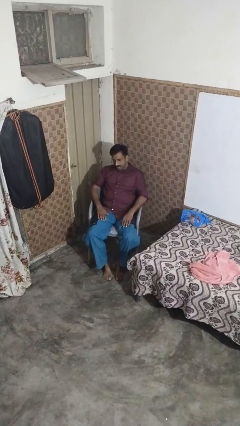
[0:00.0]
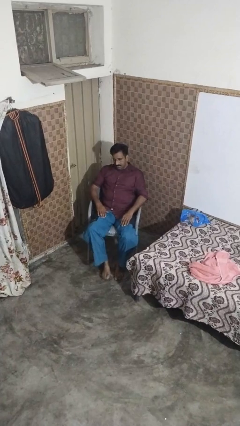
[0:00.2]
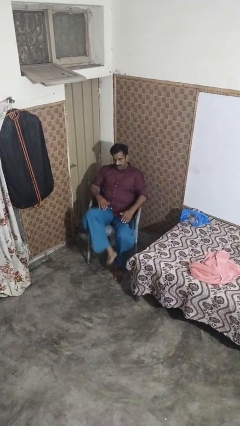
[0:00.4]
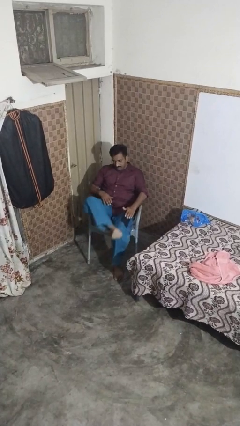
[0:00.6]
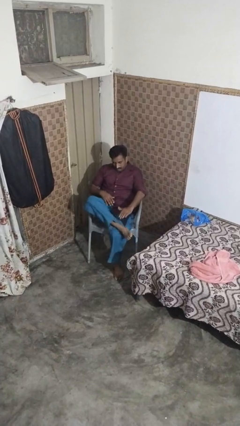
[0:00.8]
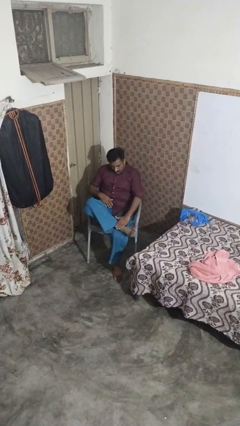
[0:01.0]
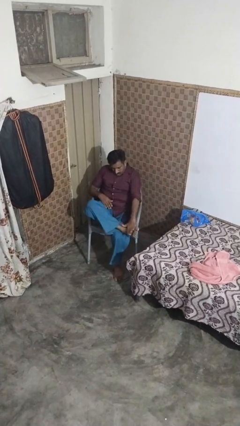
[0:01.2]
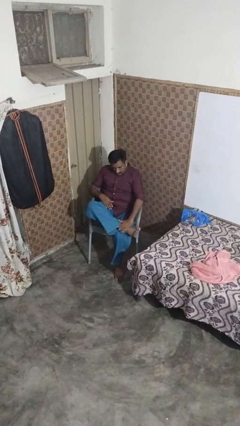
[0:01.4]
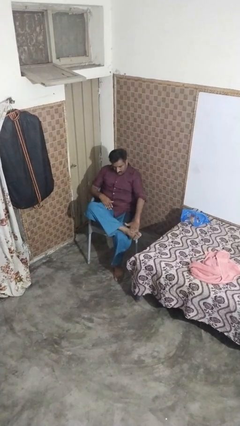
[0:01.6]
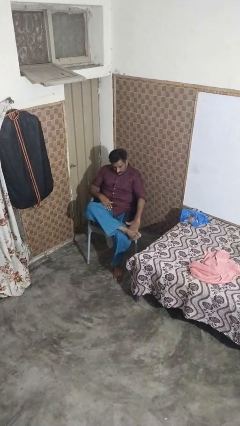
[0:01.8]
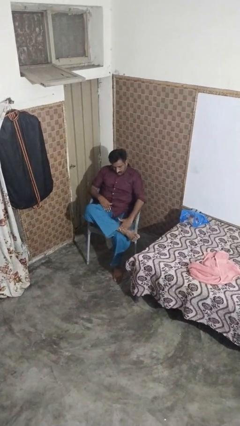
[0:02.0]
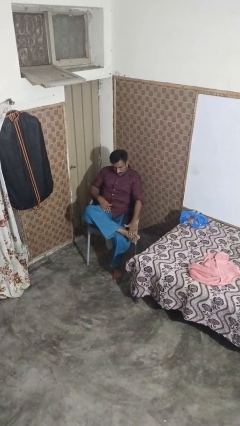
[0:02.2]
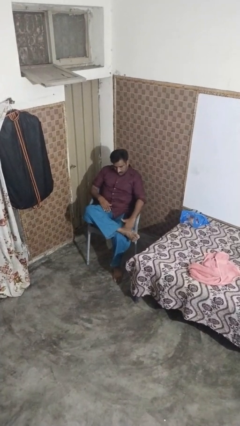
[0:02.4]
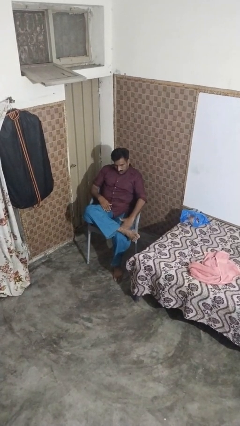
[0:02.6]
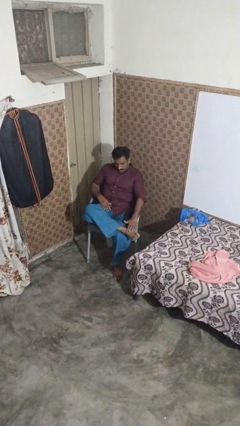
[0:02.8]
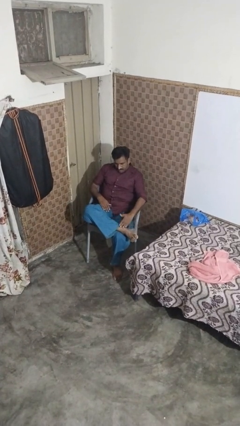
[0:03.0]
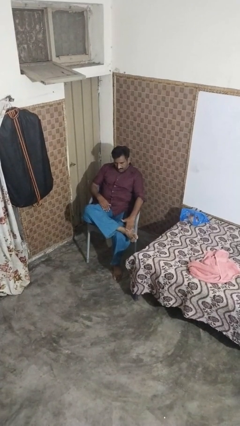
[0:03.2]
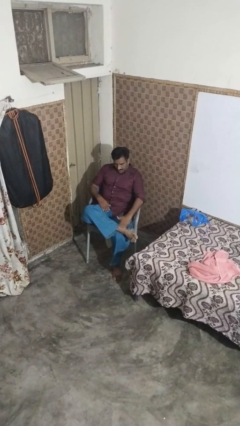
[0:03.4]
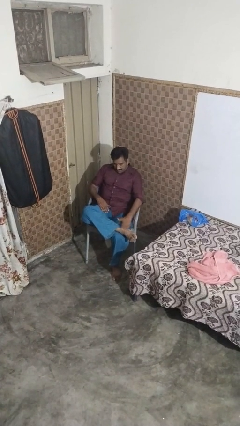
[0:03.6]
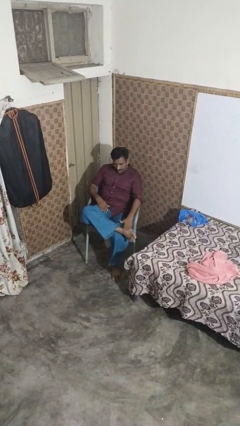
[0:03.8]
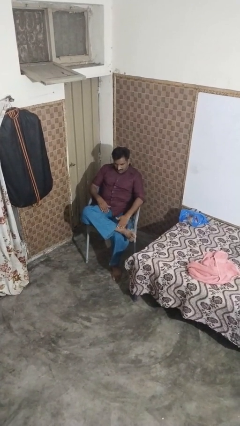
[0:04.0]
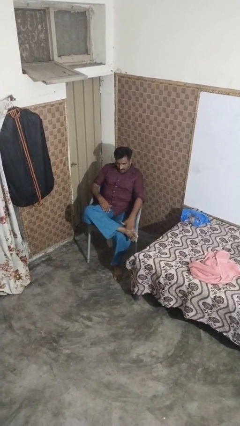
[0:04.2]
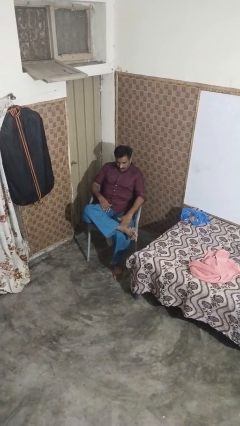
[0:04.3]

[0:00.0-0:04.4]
person rubs foot

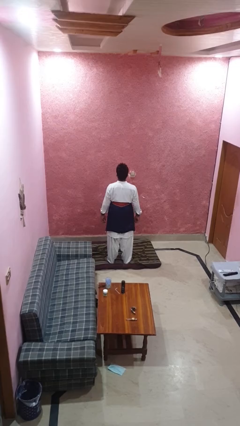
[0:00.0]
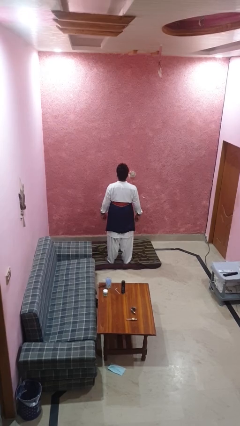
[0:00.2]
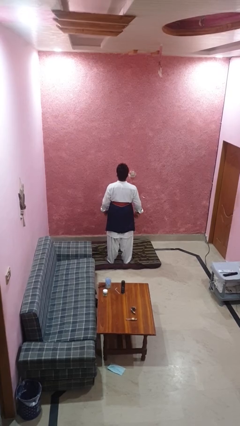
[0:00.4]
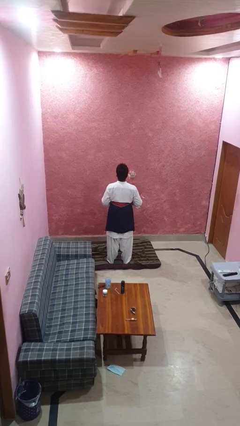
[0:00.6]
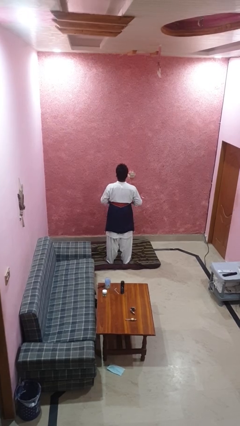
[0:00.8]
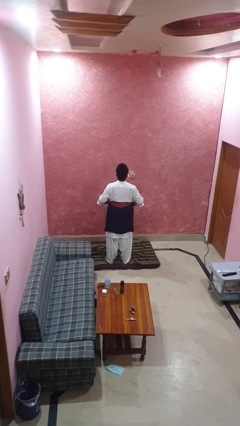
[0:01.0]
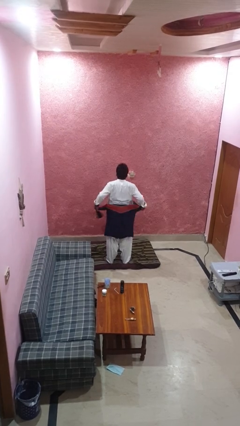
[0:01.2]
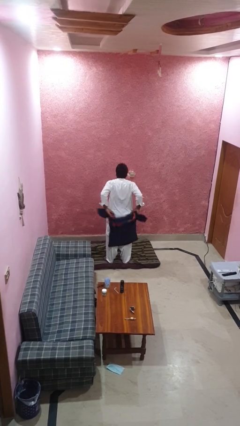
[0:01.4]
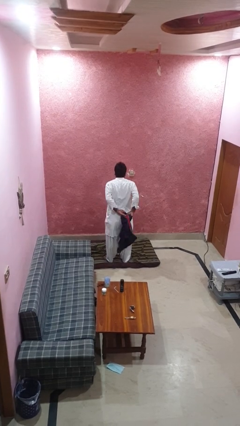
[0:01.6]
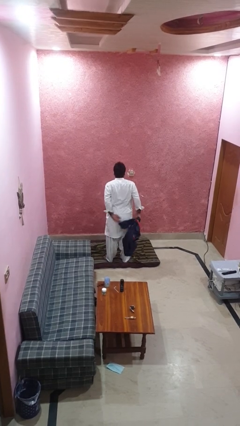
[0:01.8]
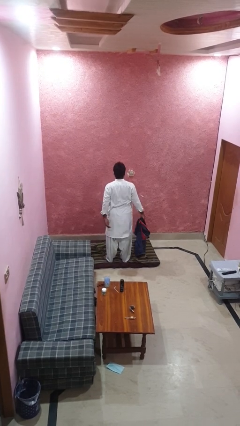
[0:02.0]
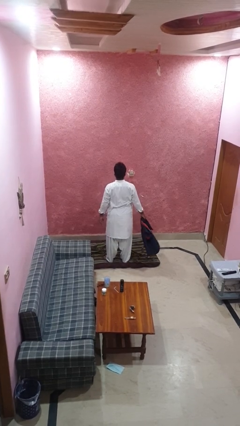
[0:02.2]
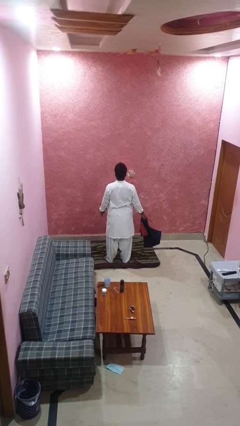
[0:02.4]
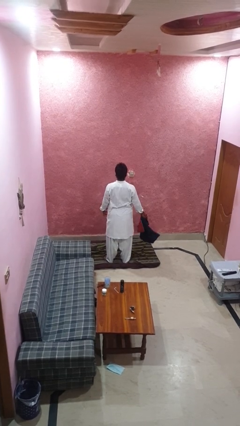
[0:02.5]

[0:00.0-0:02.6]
person unties jacket around waist

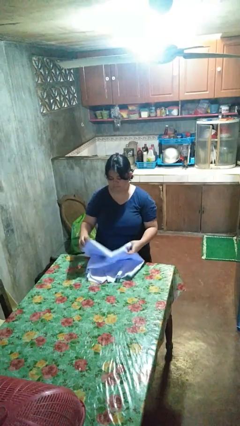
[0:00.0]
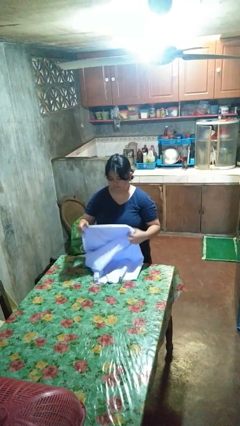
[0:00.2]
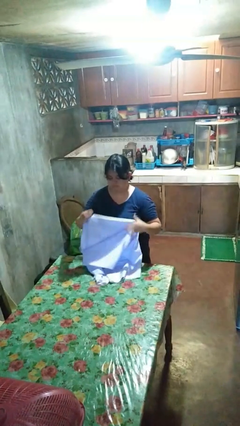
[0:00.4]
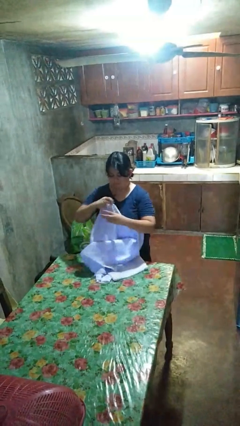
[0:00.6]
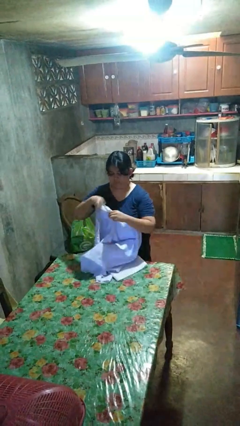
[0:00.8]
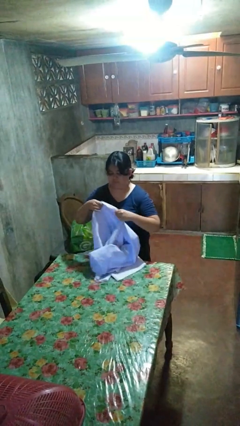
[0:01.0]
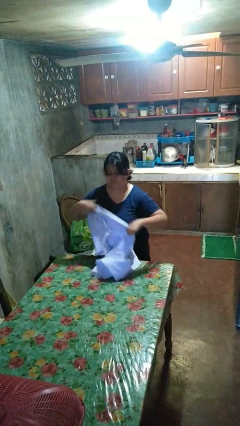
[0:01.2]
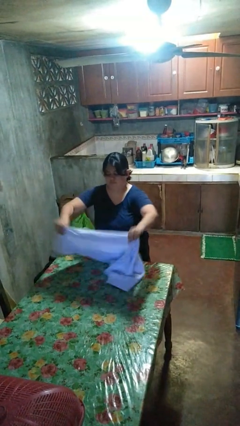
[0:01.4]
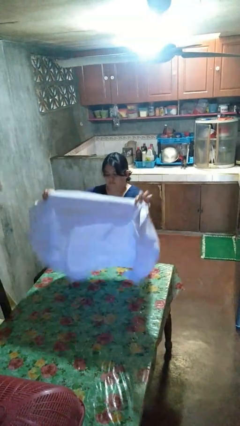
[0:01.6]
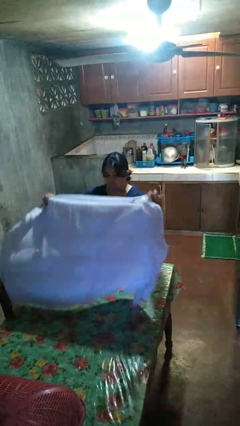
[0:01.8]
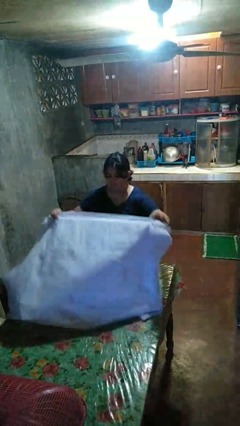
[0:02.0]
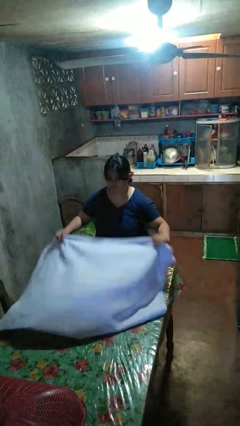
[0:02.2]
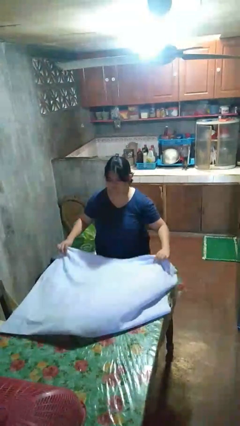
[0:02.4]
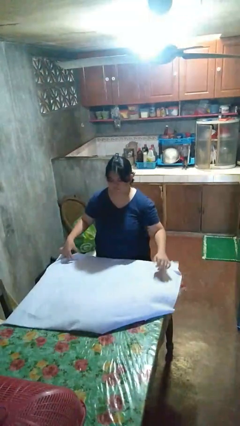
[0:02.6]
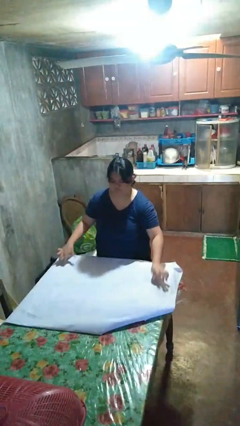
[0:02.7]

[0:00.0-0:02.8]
person spreads tablecloth

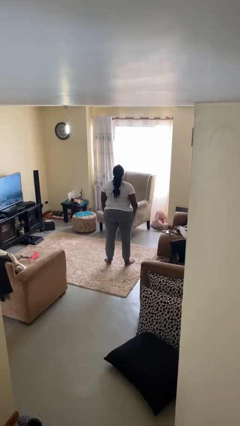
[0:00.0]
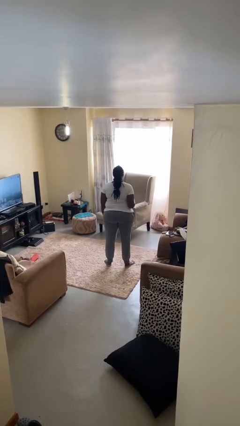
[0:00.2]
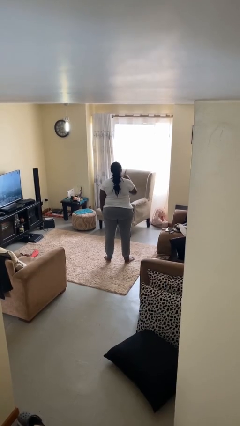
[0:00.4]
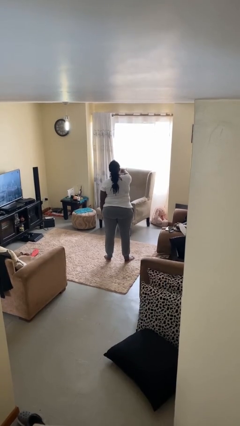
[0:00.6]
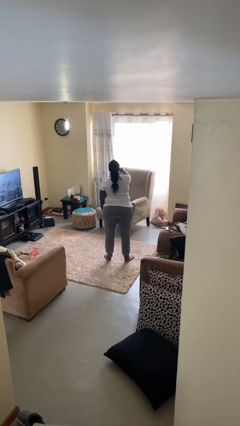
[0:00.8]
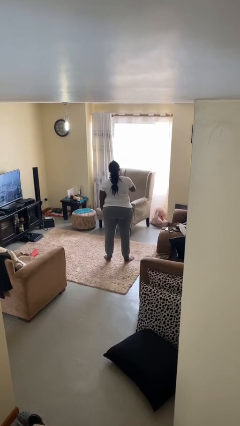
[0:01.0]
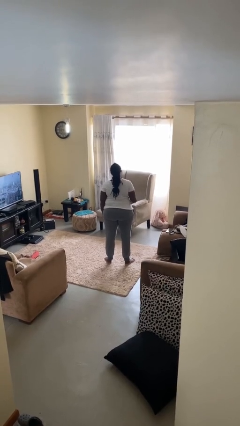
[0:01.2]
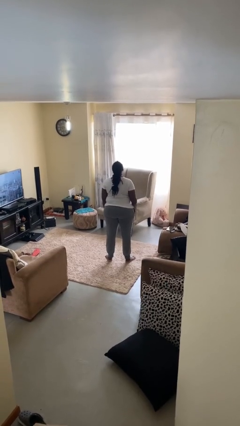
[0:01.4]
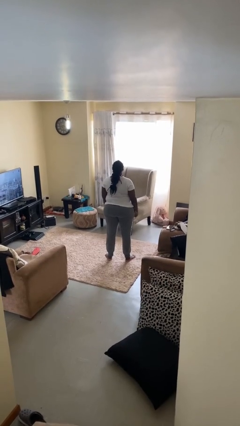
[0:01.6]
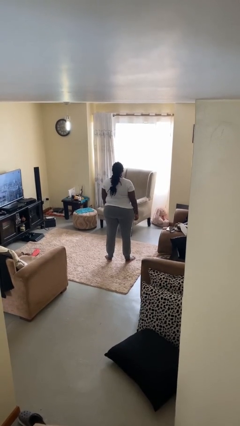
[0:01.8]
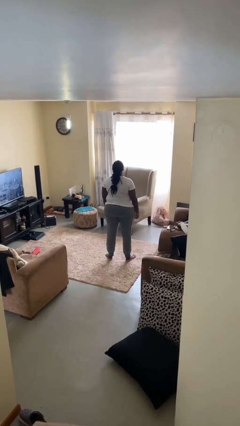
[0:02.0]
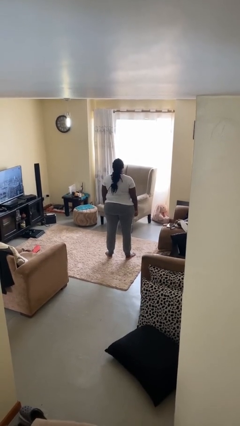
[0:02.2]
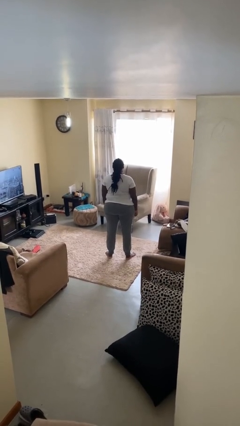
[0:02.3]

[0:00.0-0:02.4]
person punches

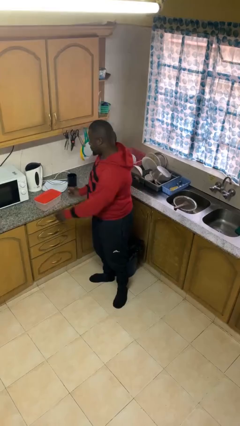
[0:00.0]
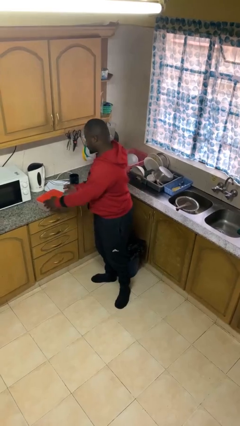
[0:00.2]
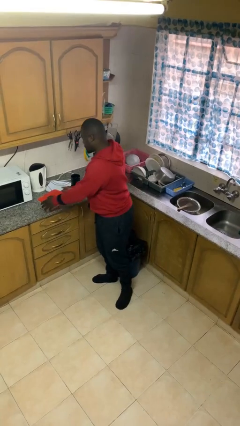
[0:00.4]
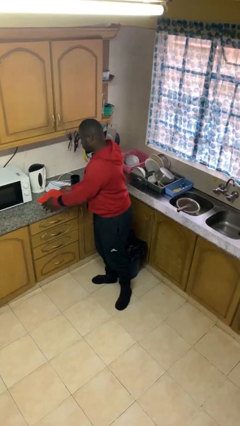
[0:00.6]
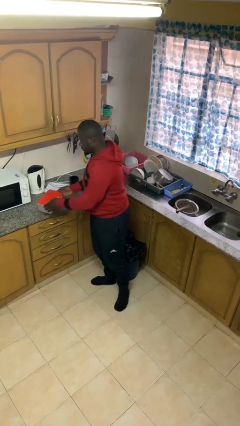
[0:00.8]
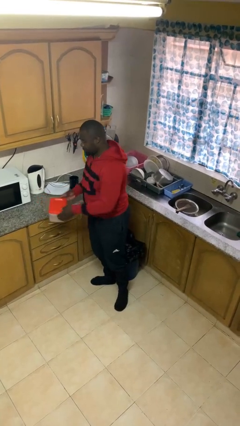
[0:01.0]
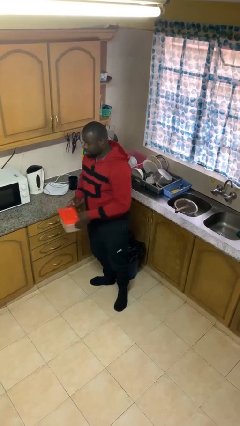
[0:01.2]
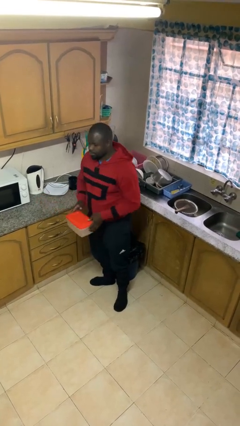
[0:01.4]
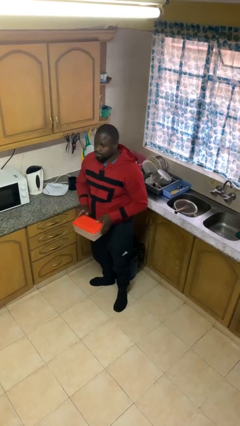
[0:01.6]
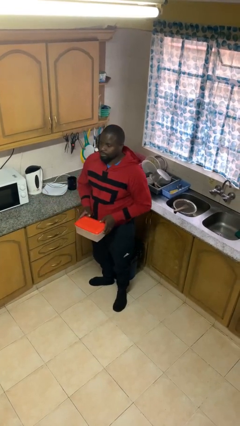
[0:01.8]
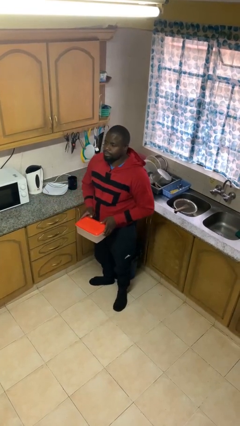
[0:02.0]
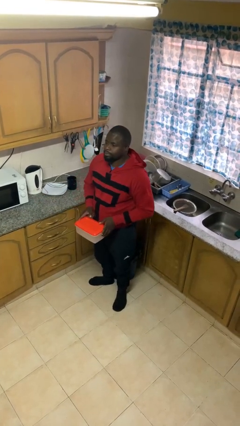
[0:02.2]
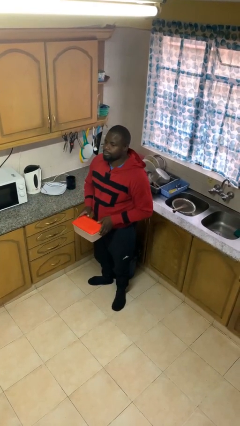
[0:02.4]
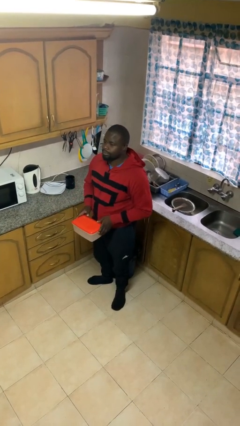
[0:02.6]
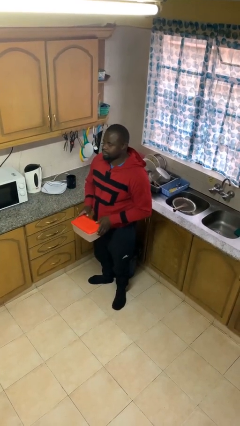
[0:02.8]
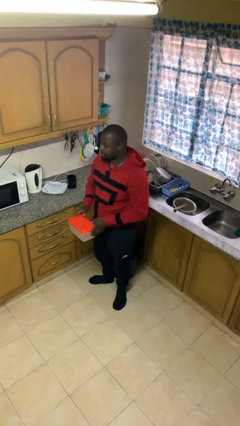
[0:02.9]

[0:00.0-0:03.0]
person picks up object from countertop

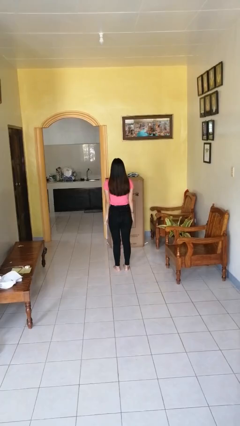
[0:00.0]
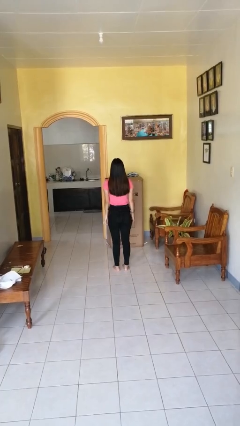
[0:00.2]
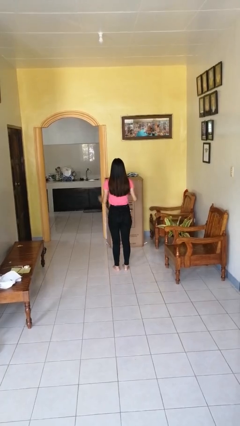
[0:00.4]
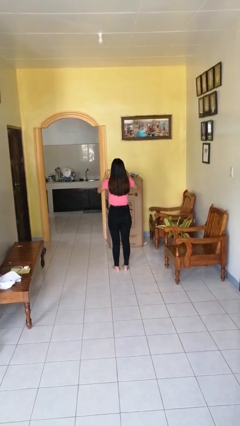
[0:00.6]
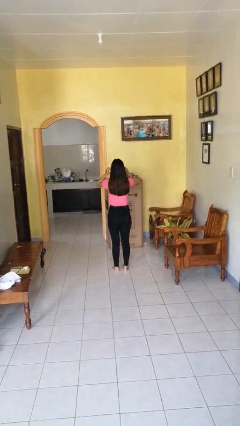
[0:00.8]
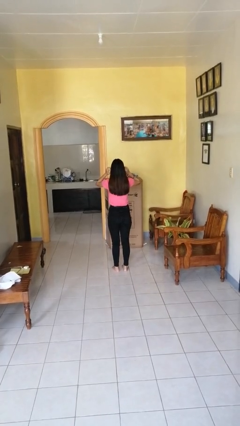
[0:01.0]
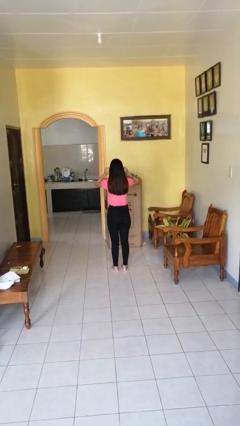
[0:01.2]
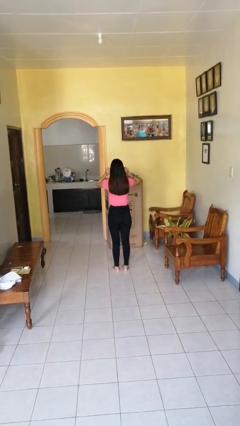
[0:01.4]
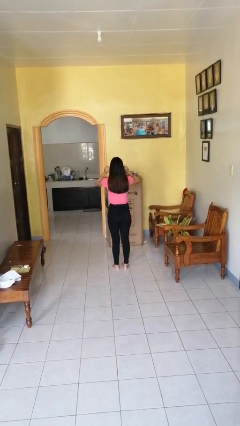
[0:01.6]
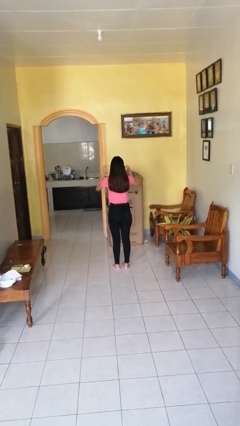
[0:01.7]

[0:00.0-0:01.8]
person puts fingers in ear

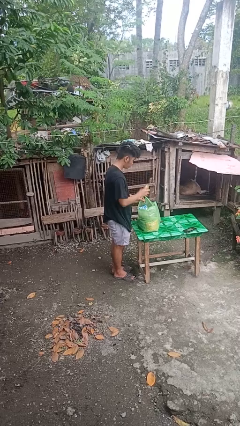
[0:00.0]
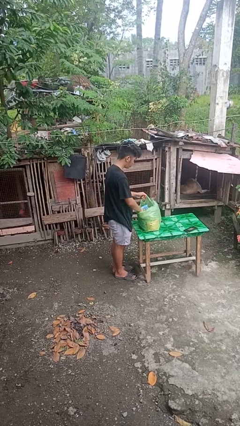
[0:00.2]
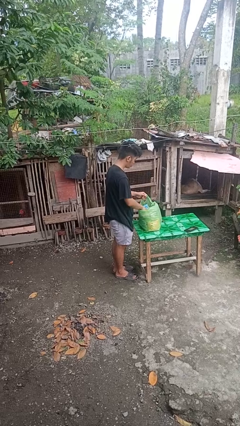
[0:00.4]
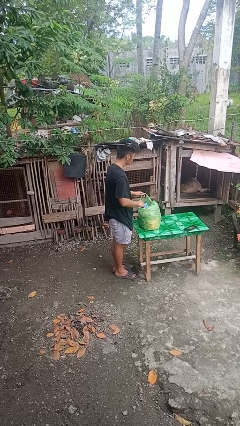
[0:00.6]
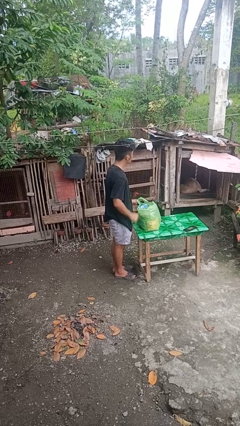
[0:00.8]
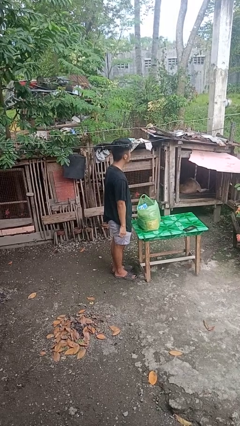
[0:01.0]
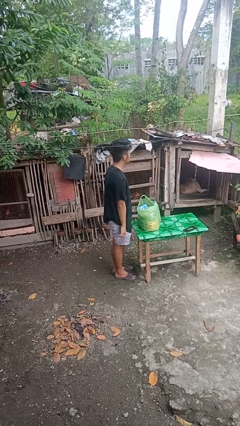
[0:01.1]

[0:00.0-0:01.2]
person puts object into bag
